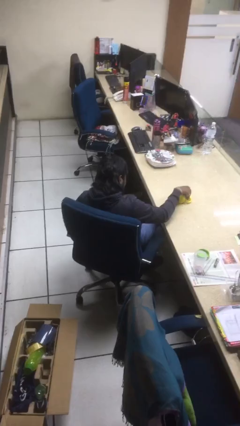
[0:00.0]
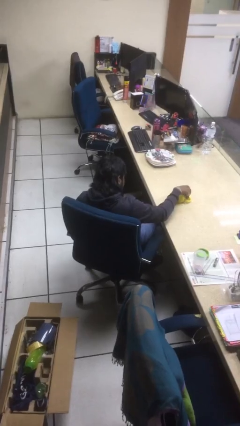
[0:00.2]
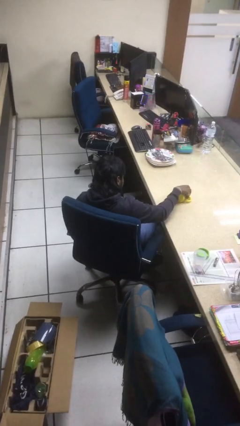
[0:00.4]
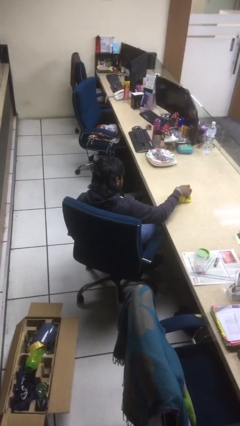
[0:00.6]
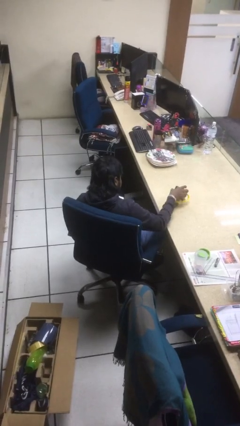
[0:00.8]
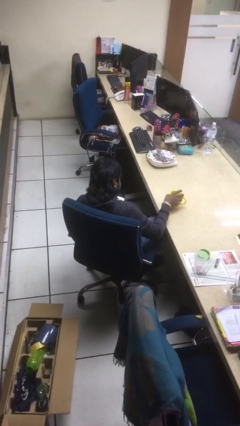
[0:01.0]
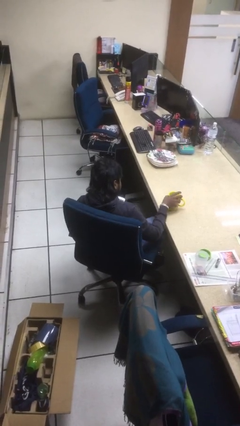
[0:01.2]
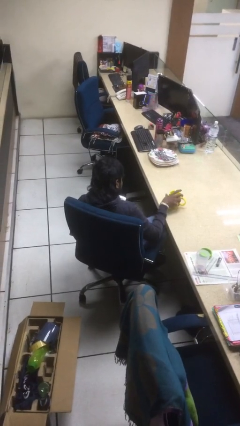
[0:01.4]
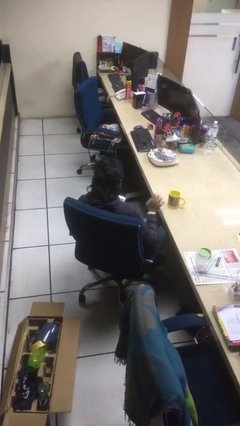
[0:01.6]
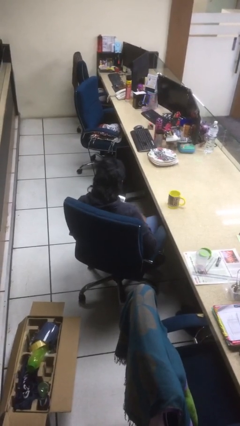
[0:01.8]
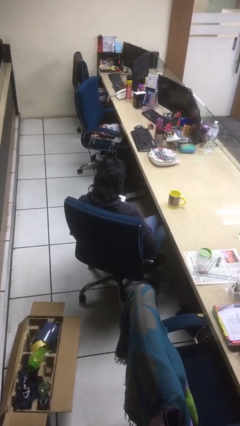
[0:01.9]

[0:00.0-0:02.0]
person sets upright glass

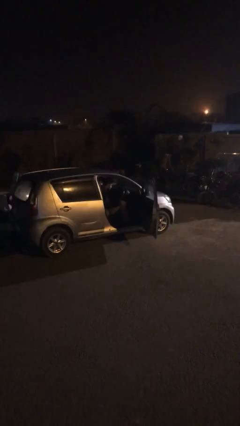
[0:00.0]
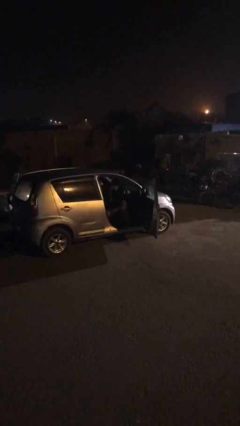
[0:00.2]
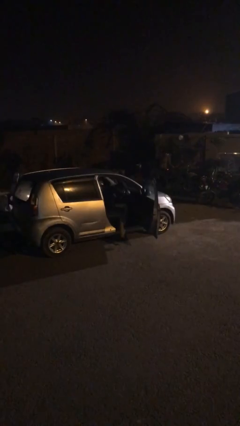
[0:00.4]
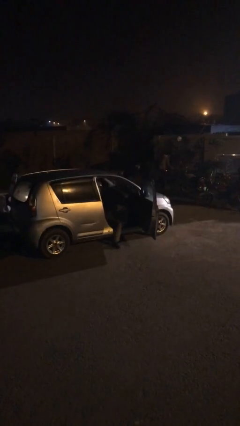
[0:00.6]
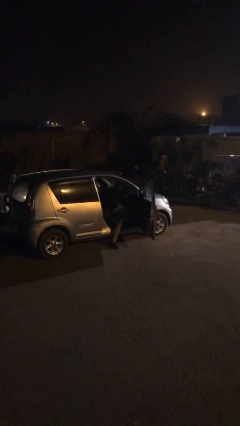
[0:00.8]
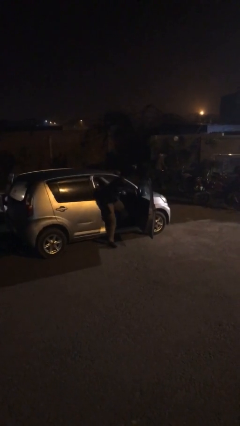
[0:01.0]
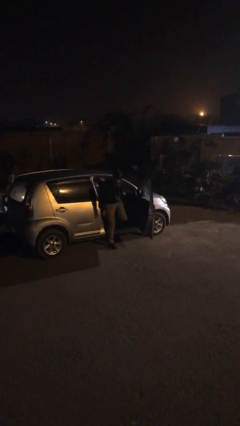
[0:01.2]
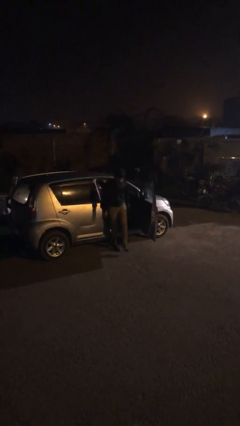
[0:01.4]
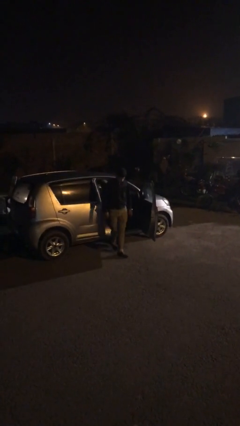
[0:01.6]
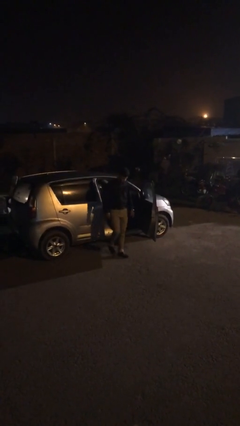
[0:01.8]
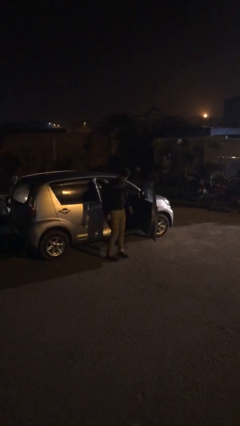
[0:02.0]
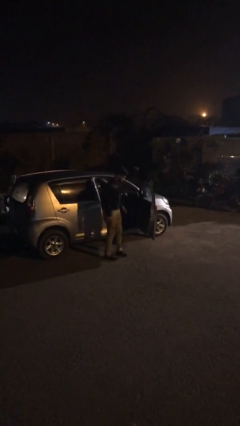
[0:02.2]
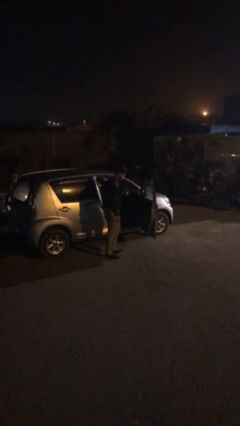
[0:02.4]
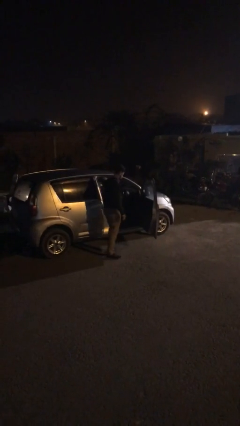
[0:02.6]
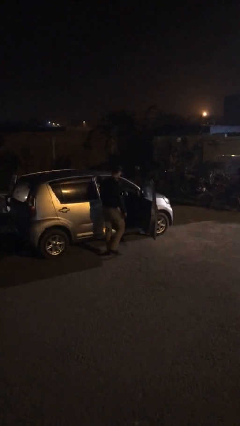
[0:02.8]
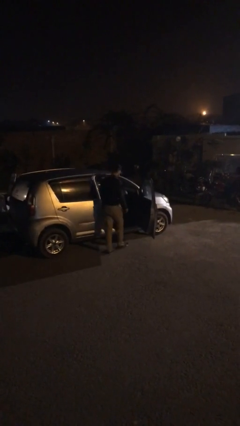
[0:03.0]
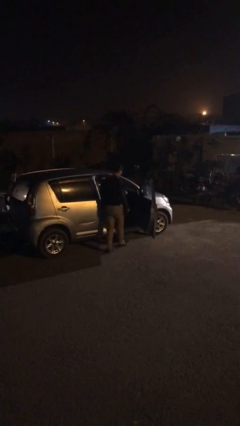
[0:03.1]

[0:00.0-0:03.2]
person exits car

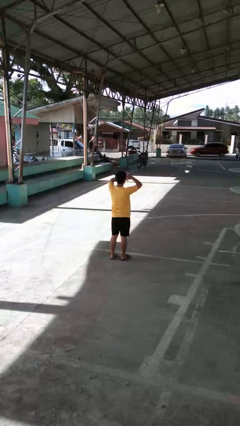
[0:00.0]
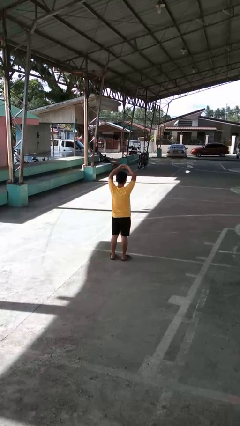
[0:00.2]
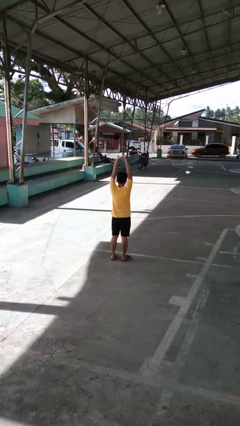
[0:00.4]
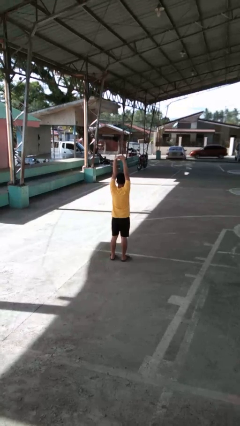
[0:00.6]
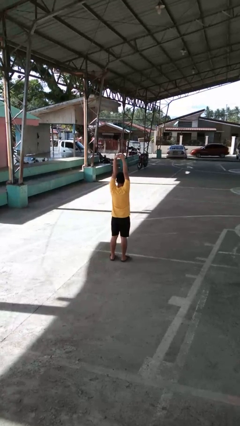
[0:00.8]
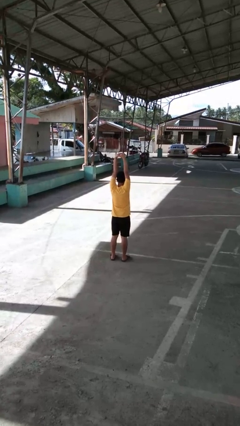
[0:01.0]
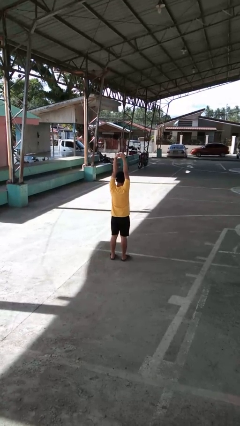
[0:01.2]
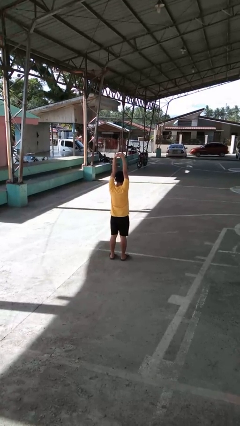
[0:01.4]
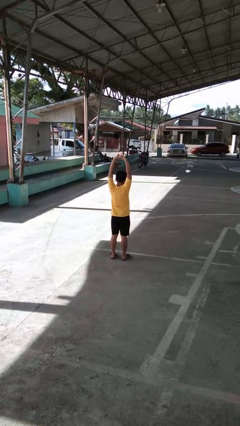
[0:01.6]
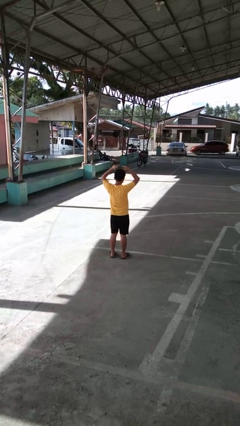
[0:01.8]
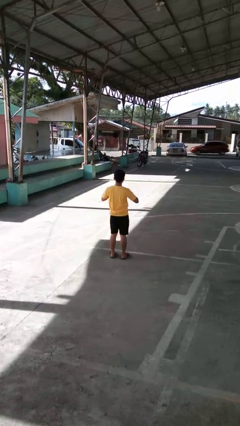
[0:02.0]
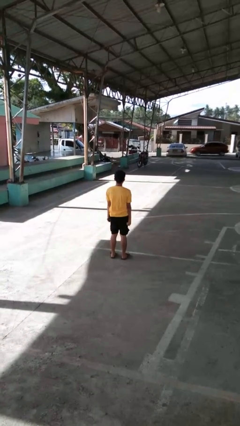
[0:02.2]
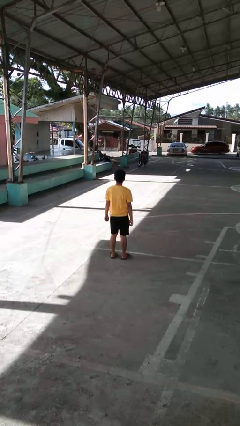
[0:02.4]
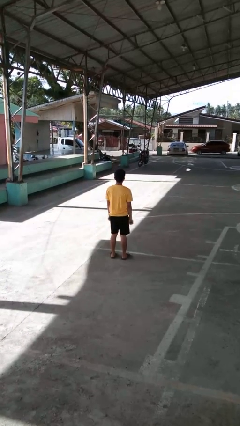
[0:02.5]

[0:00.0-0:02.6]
person stretches arms over head

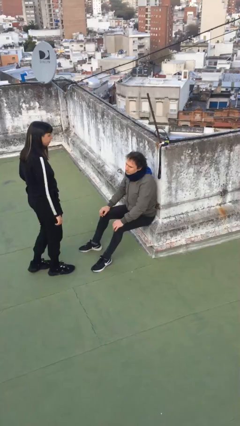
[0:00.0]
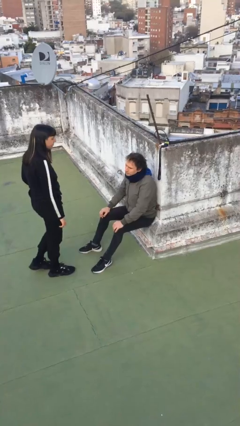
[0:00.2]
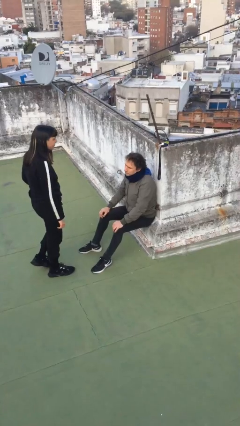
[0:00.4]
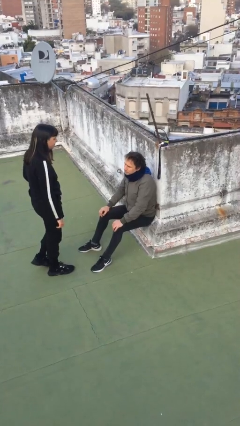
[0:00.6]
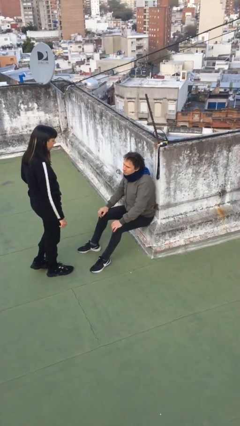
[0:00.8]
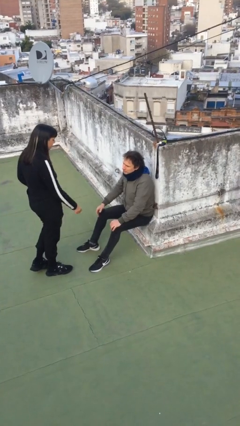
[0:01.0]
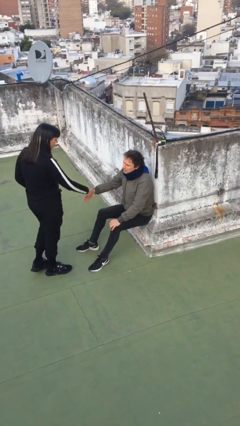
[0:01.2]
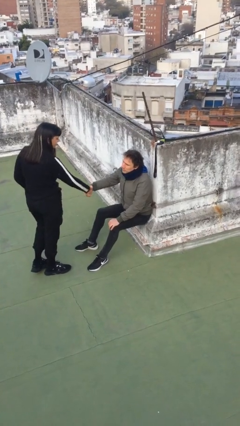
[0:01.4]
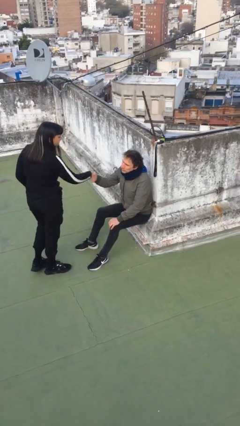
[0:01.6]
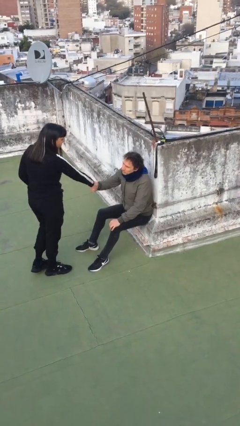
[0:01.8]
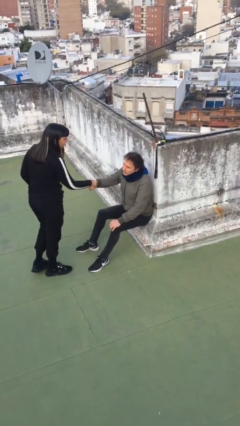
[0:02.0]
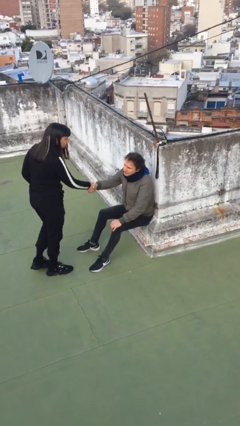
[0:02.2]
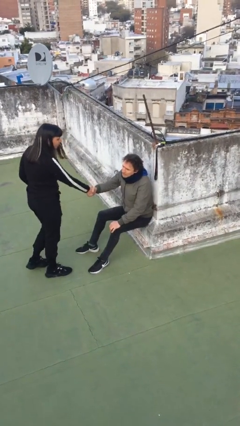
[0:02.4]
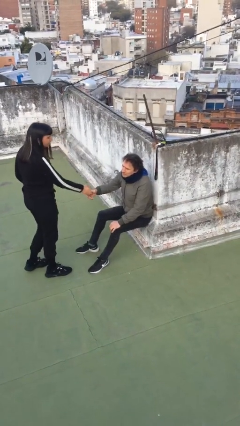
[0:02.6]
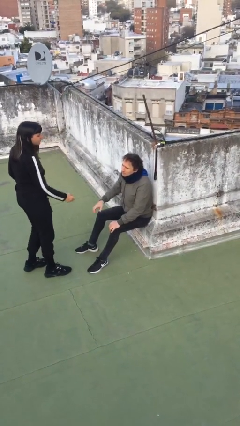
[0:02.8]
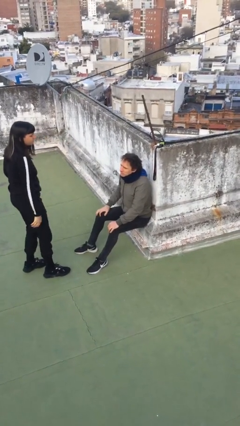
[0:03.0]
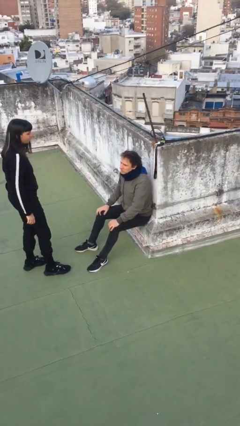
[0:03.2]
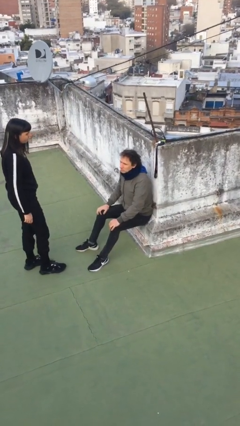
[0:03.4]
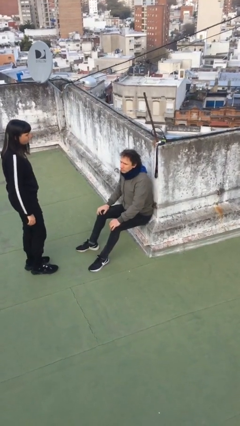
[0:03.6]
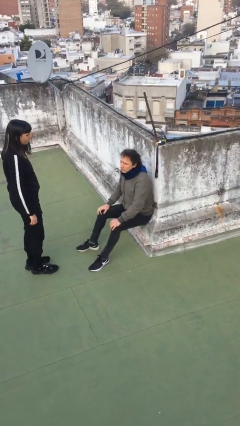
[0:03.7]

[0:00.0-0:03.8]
person shakes hand

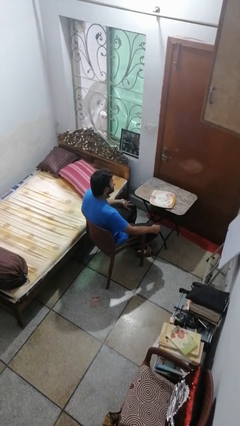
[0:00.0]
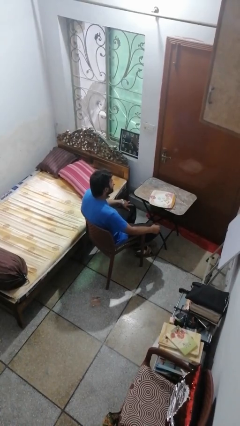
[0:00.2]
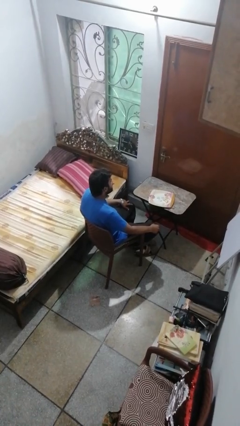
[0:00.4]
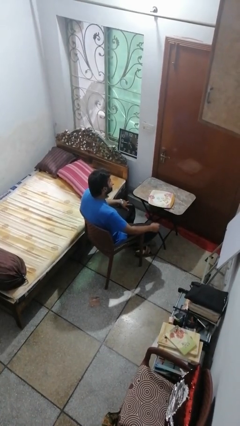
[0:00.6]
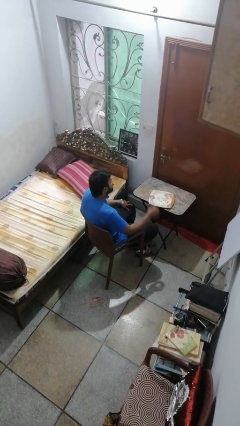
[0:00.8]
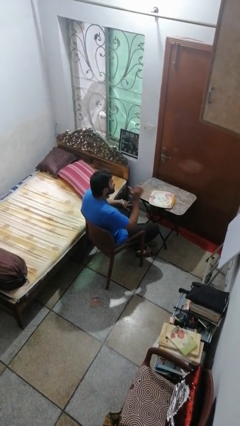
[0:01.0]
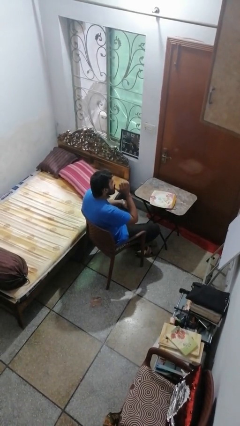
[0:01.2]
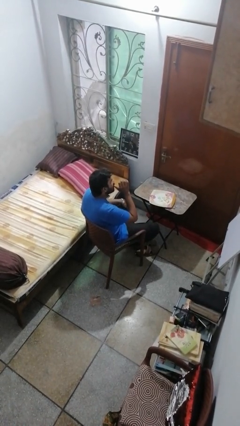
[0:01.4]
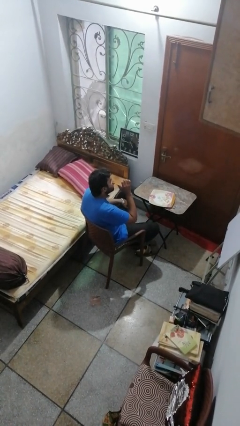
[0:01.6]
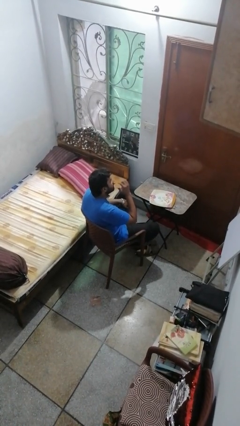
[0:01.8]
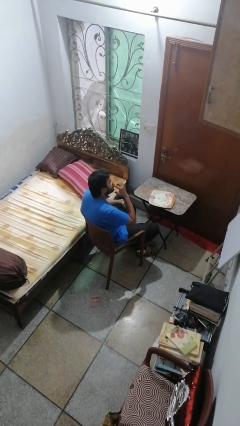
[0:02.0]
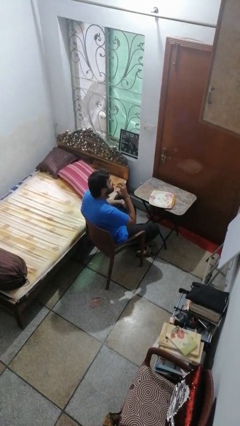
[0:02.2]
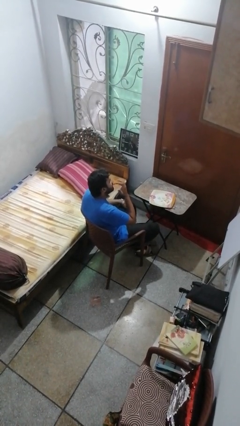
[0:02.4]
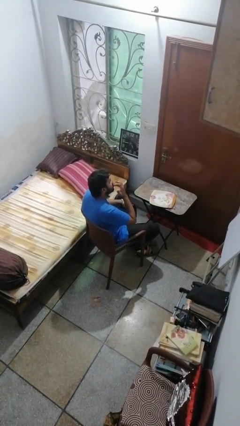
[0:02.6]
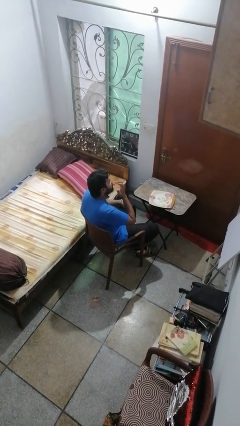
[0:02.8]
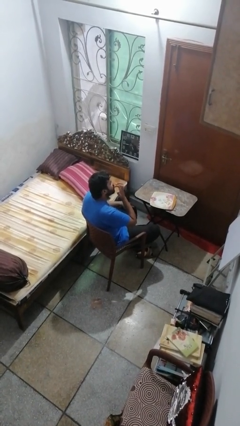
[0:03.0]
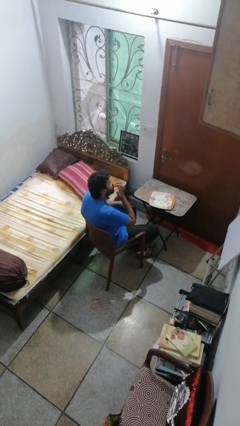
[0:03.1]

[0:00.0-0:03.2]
person licks fingers

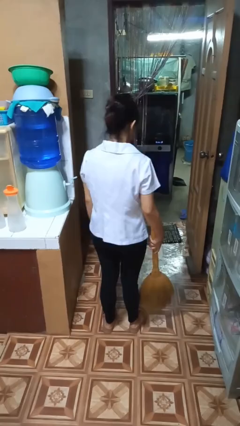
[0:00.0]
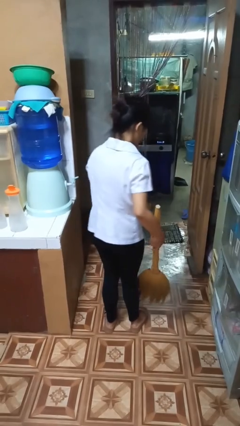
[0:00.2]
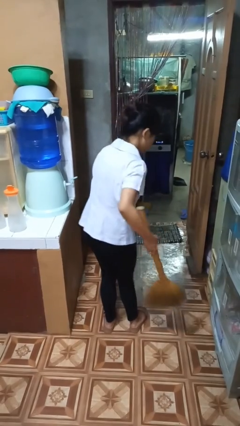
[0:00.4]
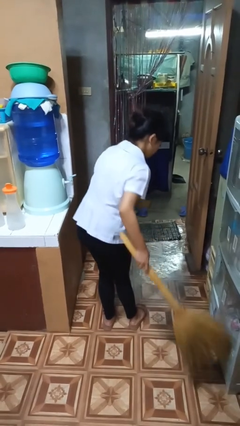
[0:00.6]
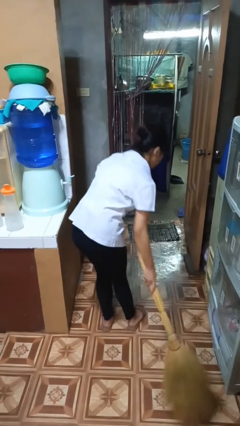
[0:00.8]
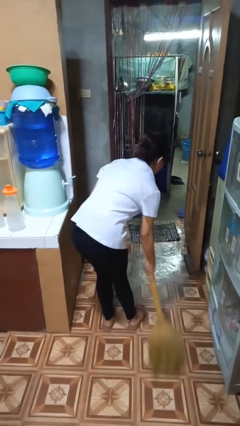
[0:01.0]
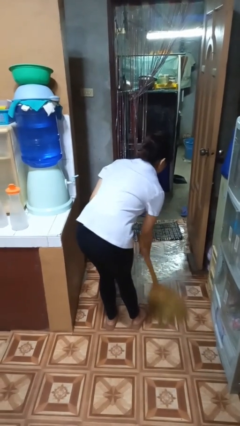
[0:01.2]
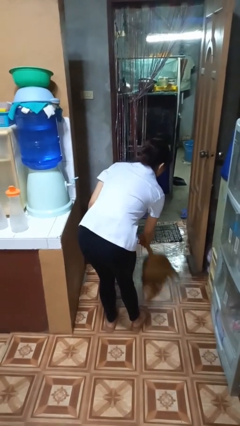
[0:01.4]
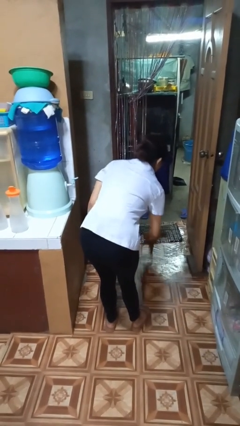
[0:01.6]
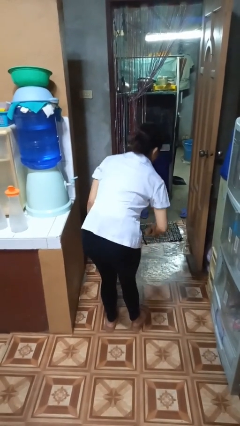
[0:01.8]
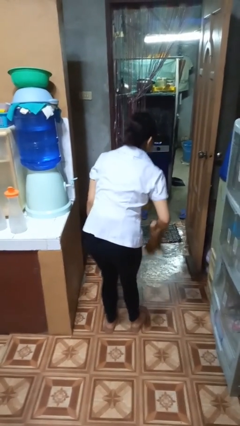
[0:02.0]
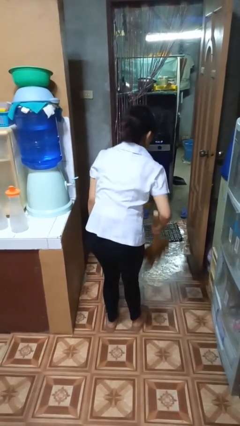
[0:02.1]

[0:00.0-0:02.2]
person sweeps floor
